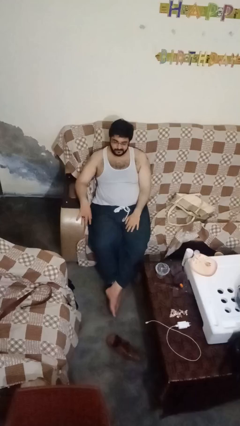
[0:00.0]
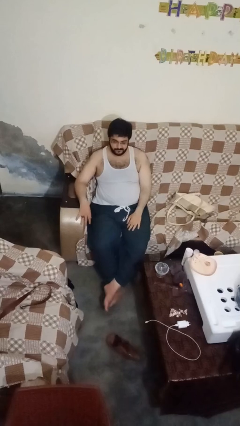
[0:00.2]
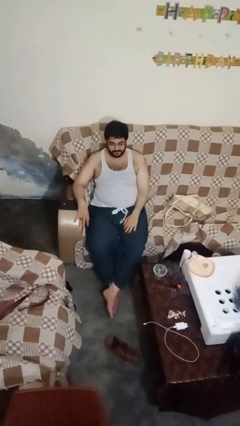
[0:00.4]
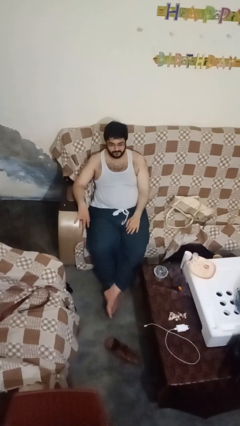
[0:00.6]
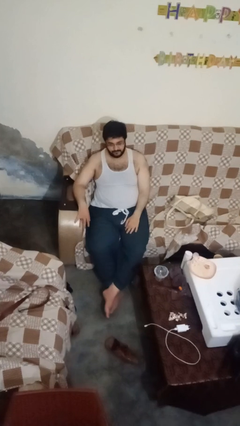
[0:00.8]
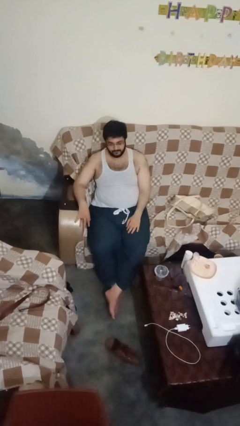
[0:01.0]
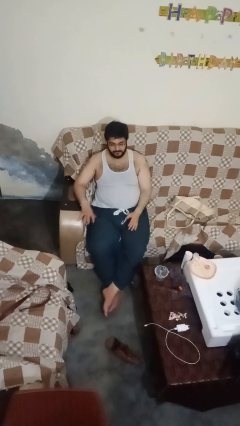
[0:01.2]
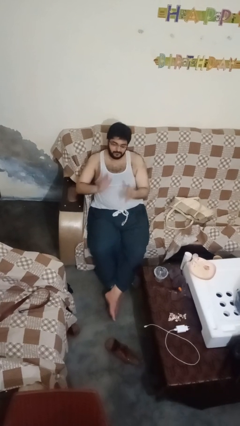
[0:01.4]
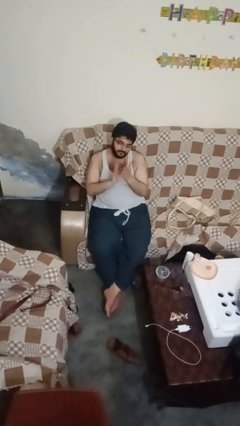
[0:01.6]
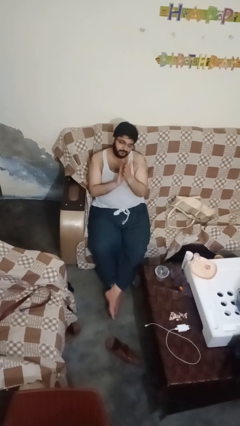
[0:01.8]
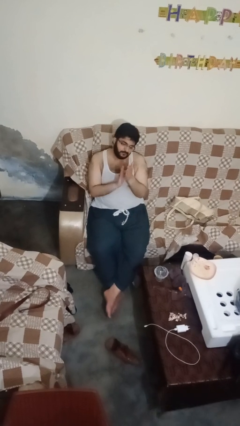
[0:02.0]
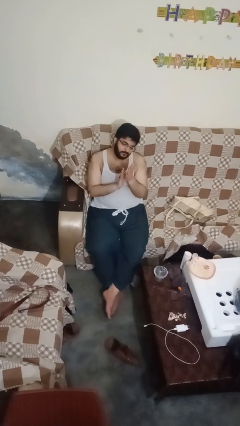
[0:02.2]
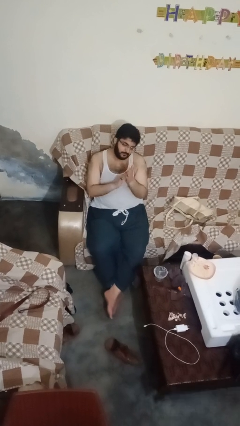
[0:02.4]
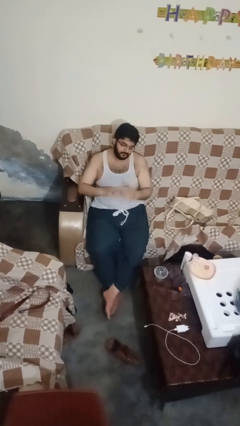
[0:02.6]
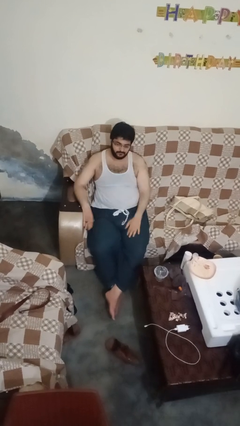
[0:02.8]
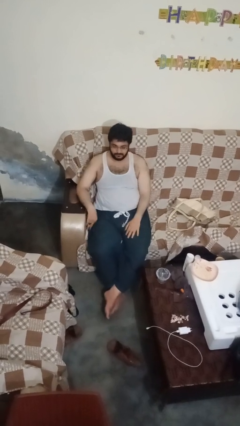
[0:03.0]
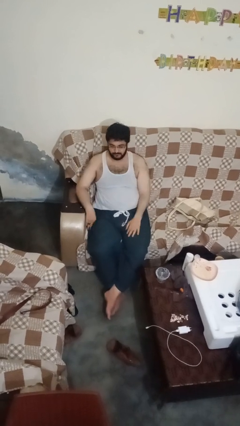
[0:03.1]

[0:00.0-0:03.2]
person claps hands

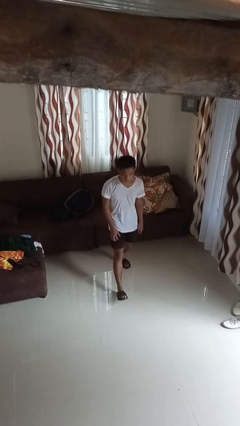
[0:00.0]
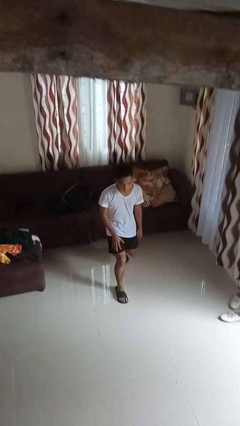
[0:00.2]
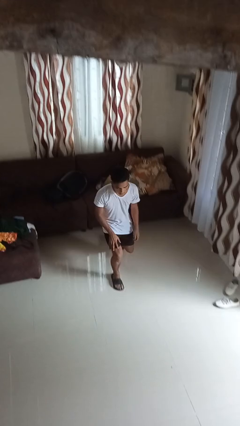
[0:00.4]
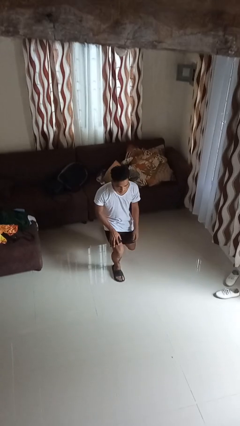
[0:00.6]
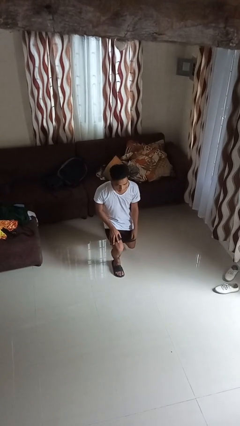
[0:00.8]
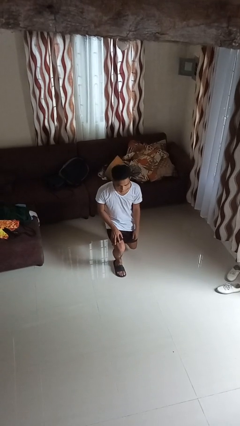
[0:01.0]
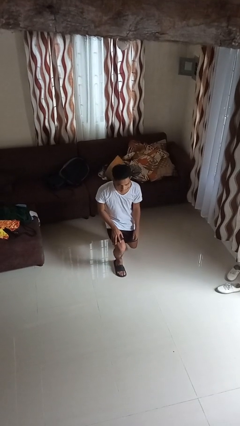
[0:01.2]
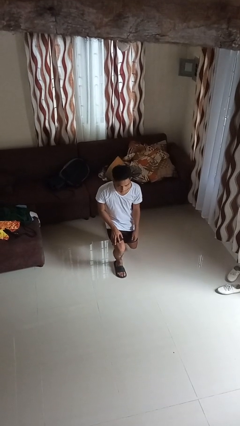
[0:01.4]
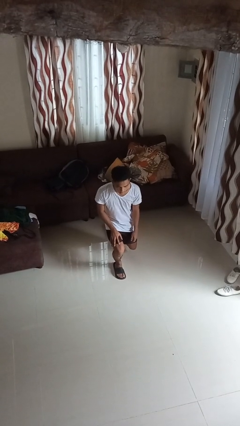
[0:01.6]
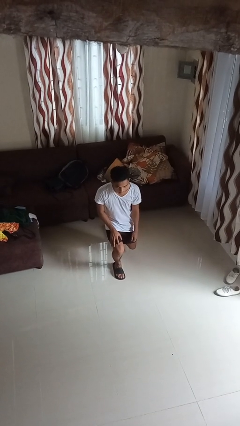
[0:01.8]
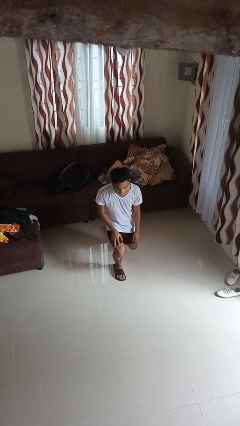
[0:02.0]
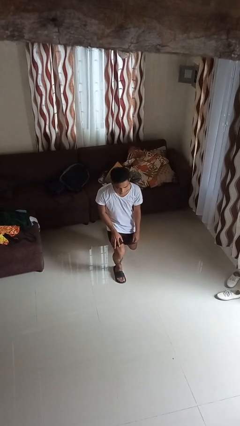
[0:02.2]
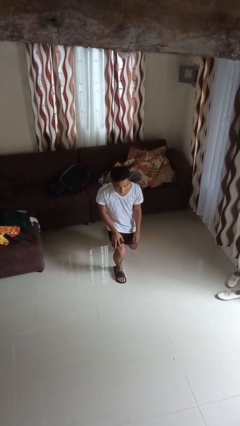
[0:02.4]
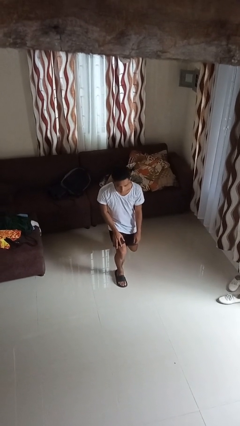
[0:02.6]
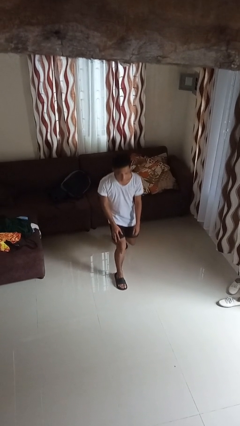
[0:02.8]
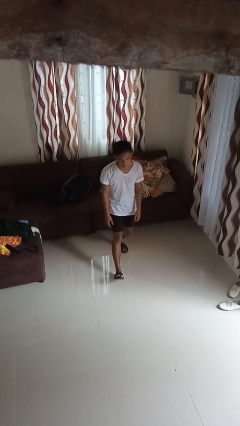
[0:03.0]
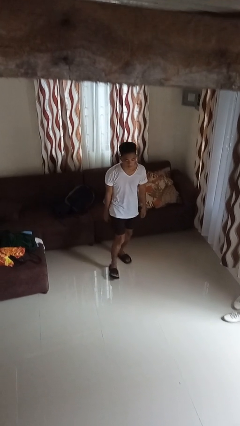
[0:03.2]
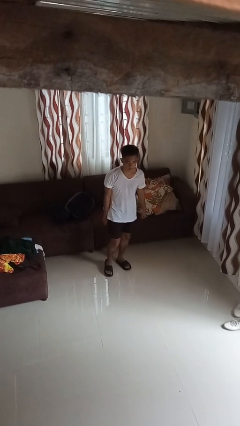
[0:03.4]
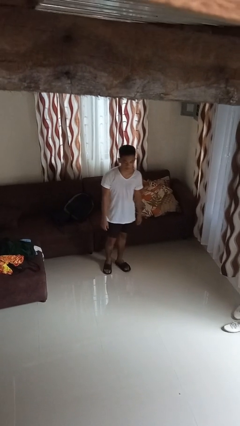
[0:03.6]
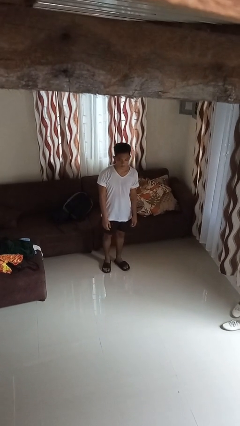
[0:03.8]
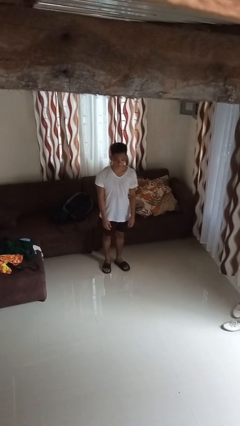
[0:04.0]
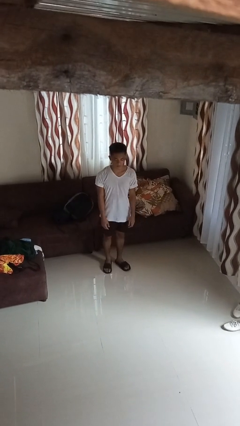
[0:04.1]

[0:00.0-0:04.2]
person exercises with lunges

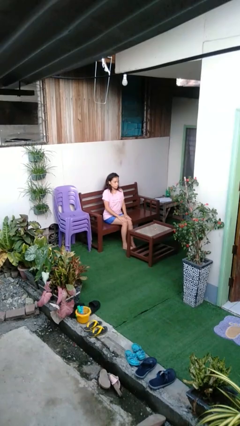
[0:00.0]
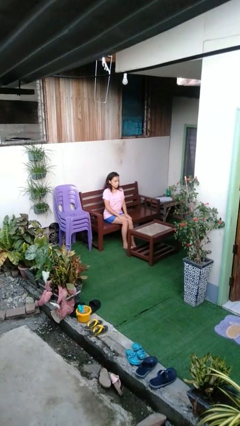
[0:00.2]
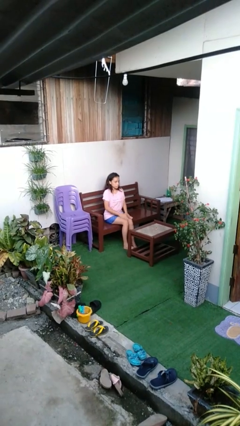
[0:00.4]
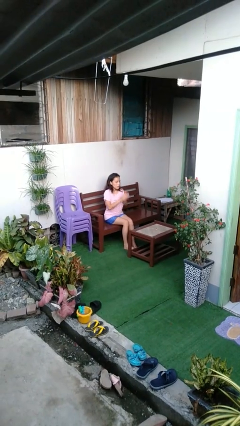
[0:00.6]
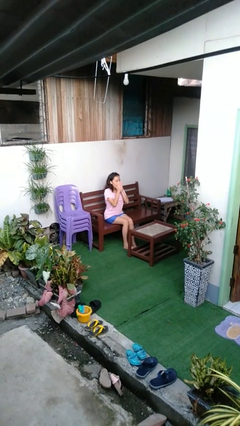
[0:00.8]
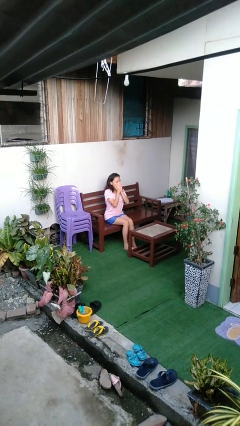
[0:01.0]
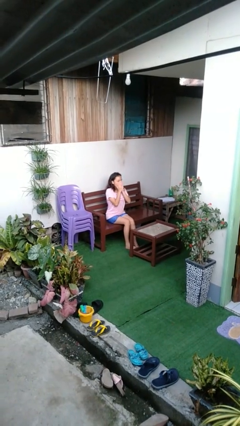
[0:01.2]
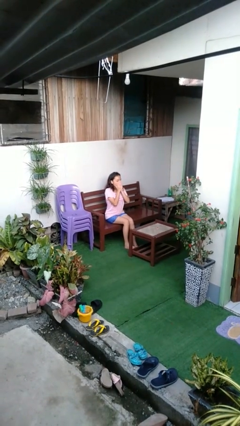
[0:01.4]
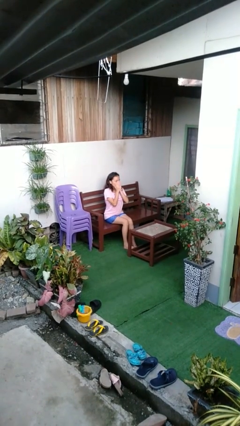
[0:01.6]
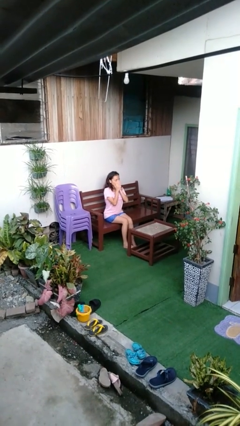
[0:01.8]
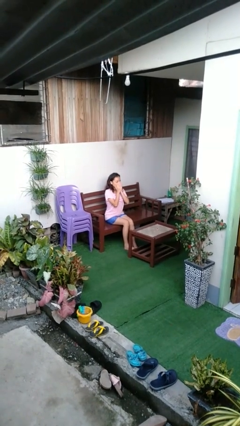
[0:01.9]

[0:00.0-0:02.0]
person yawns

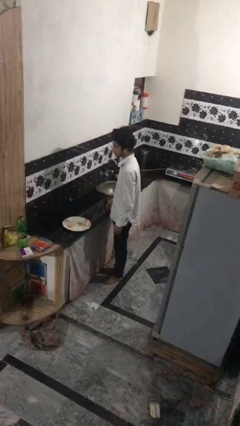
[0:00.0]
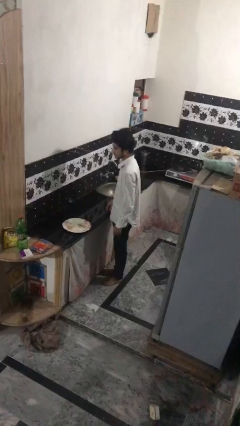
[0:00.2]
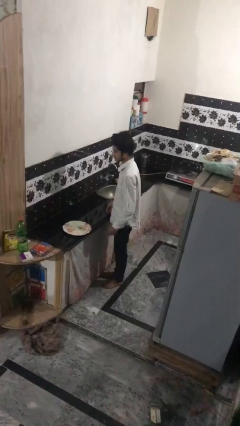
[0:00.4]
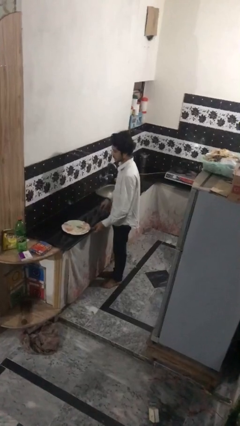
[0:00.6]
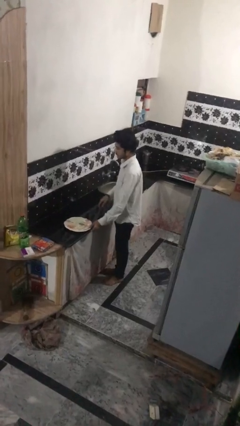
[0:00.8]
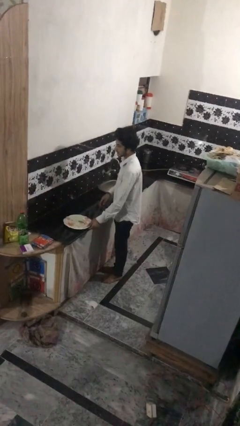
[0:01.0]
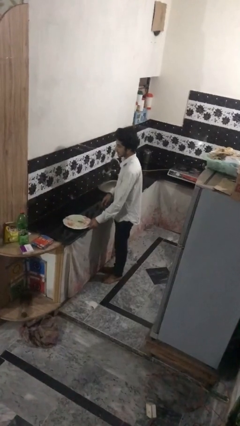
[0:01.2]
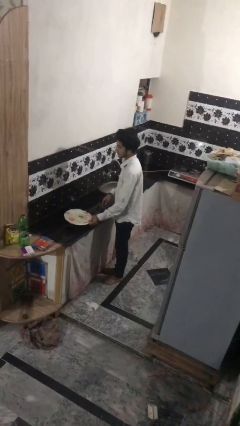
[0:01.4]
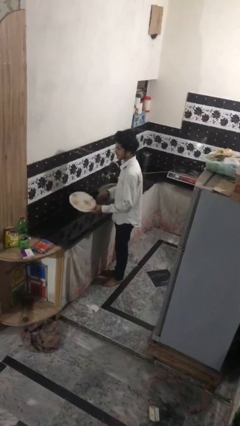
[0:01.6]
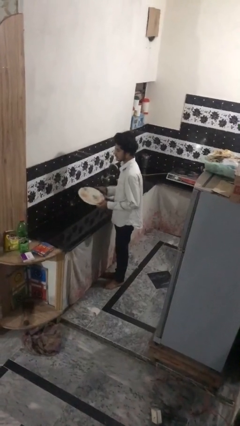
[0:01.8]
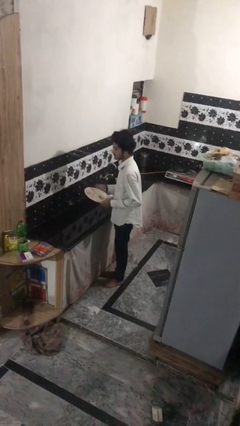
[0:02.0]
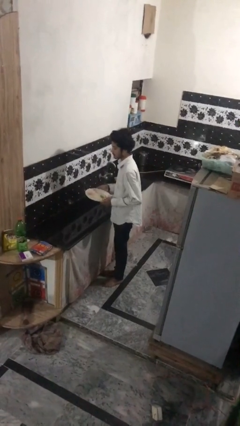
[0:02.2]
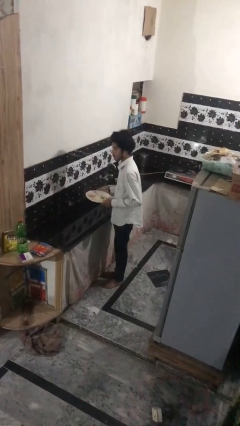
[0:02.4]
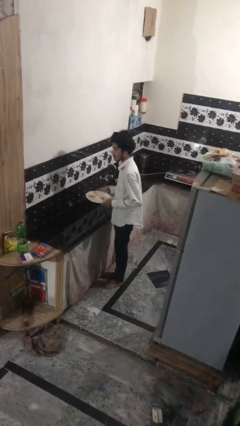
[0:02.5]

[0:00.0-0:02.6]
person picks up object from countertop

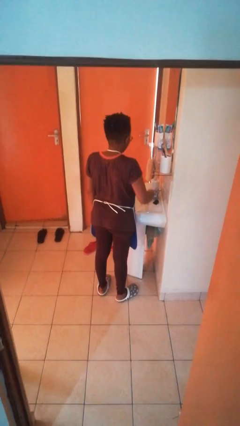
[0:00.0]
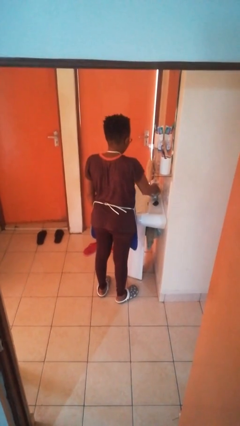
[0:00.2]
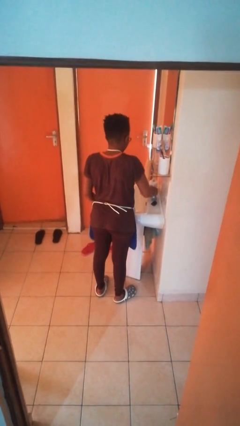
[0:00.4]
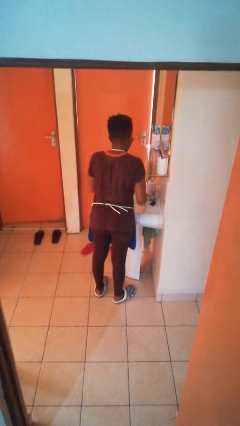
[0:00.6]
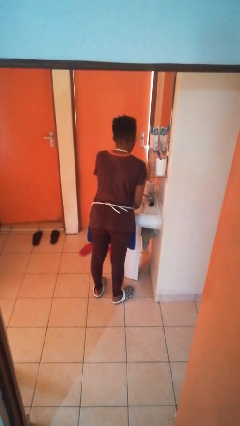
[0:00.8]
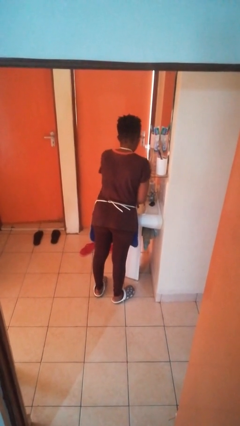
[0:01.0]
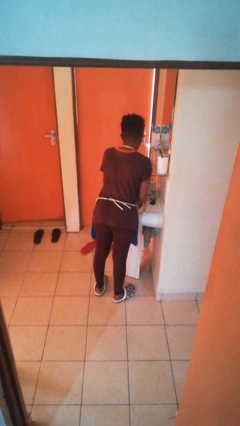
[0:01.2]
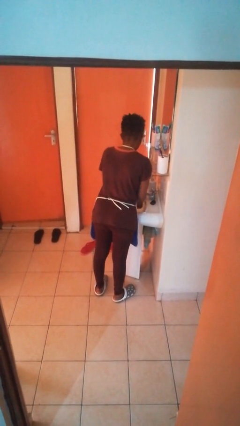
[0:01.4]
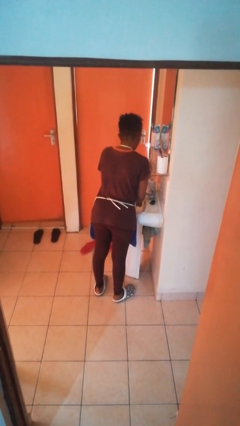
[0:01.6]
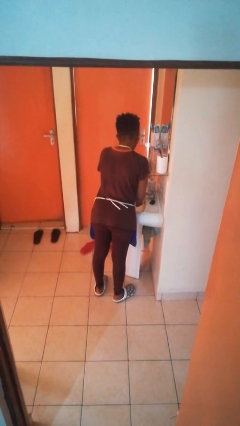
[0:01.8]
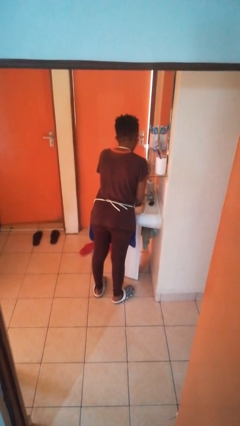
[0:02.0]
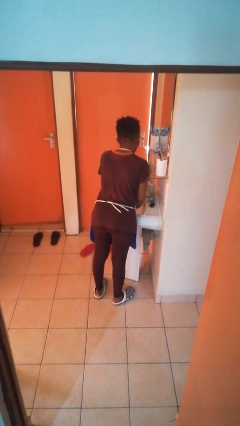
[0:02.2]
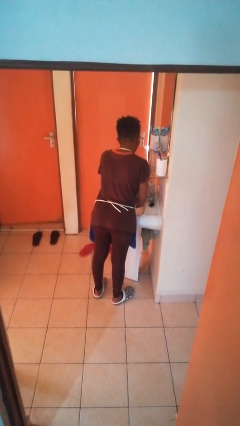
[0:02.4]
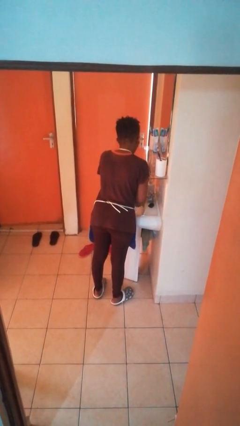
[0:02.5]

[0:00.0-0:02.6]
person washes hands

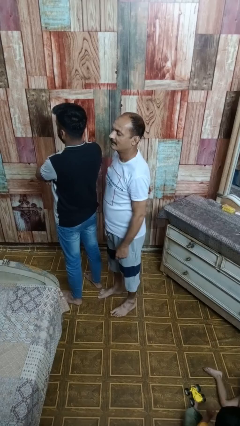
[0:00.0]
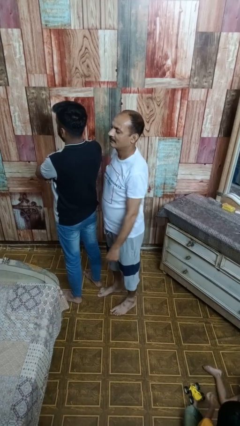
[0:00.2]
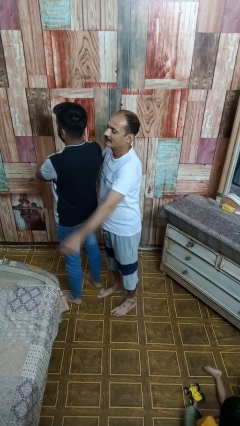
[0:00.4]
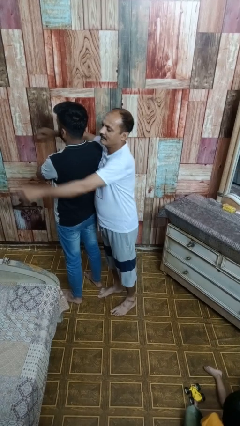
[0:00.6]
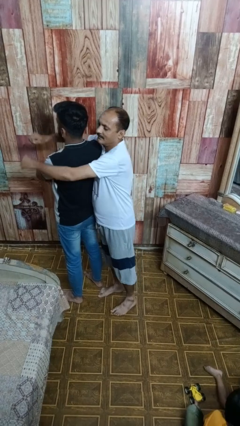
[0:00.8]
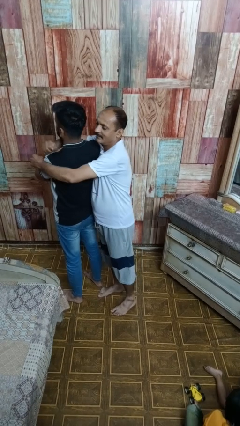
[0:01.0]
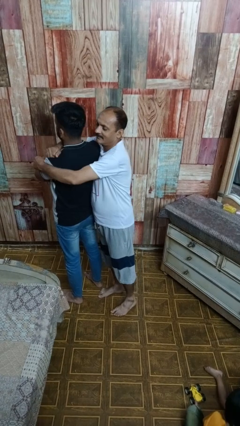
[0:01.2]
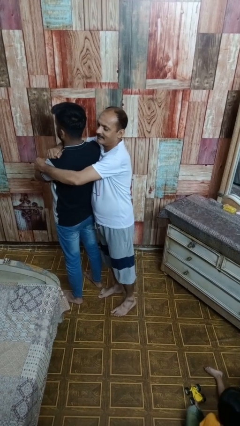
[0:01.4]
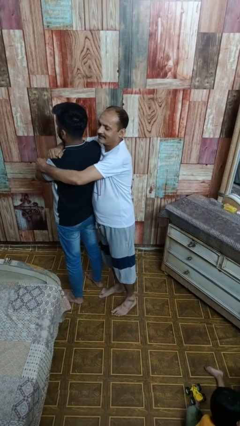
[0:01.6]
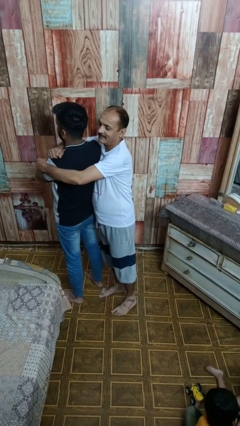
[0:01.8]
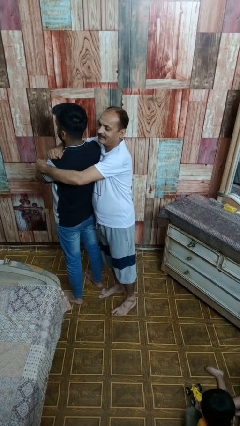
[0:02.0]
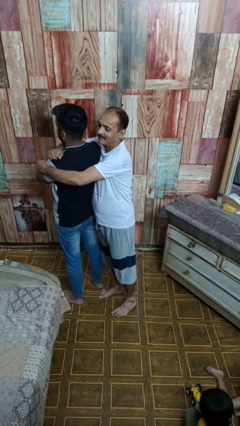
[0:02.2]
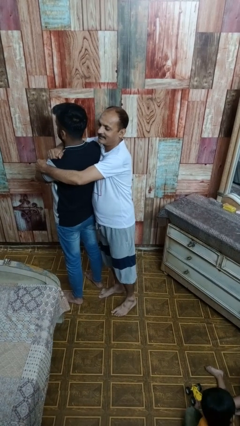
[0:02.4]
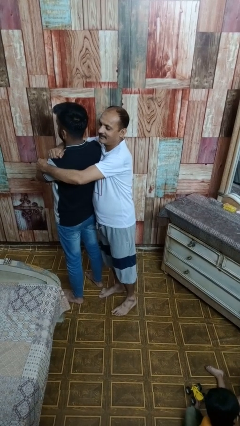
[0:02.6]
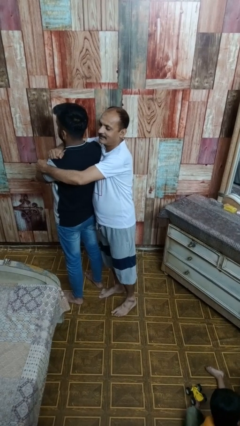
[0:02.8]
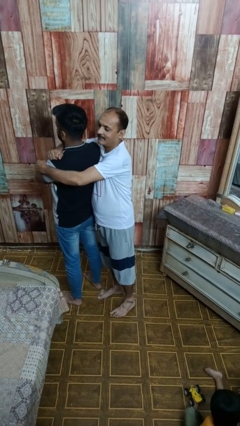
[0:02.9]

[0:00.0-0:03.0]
person hugs person from behind
